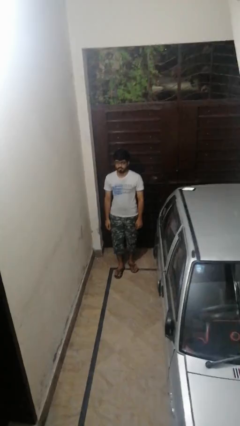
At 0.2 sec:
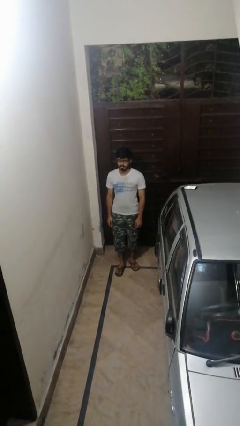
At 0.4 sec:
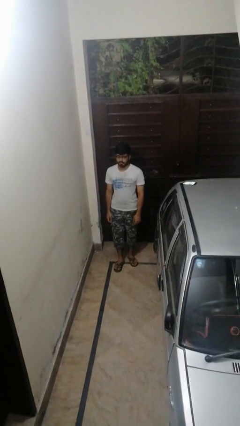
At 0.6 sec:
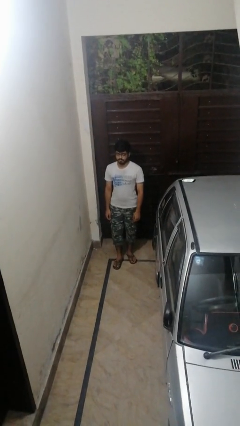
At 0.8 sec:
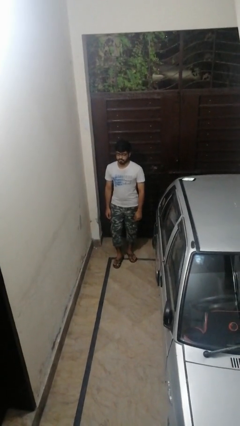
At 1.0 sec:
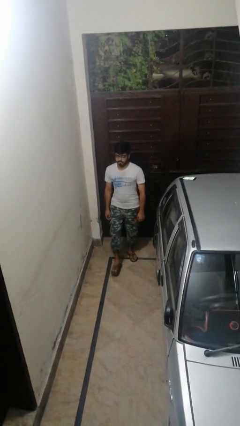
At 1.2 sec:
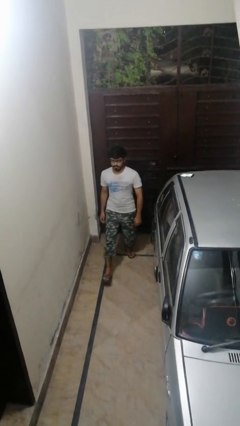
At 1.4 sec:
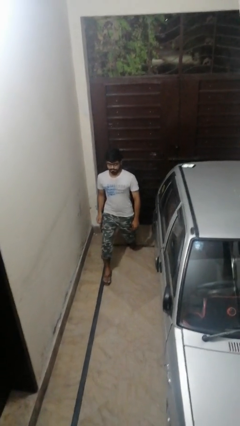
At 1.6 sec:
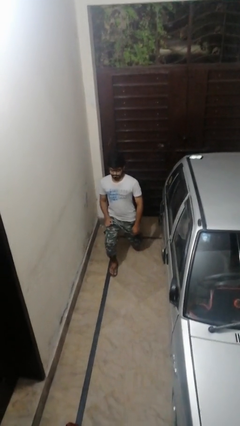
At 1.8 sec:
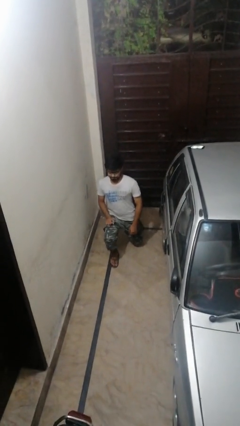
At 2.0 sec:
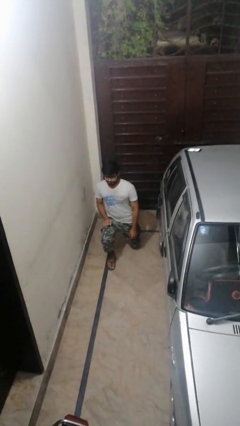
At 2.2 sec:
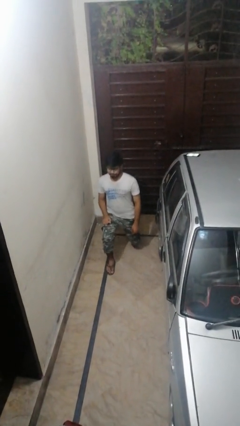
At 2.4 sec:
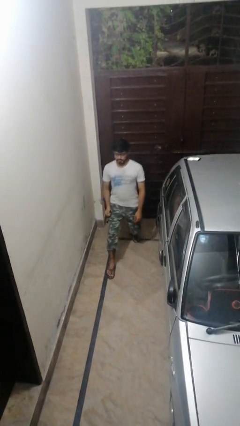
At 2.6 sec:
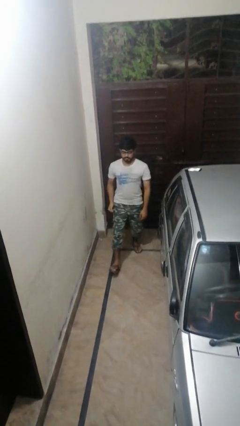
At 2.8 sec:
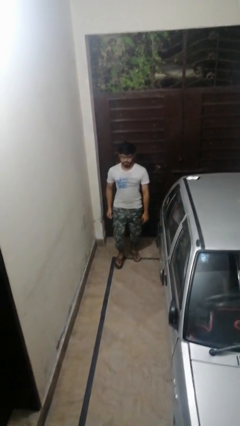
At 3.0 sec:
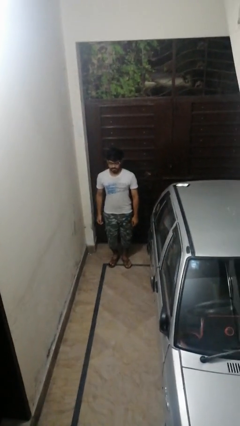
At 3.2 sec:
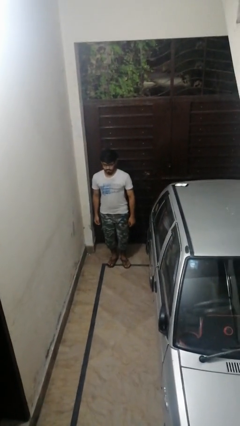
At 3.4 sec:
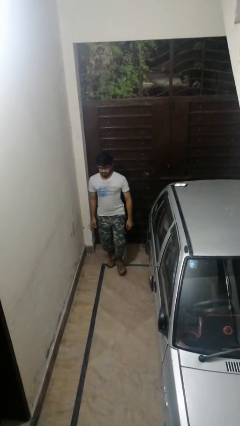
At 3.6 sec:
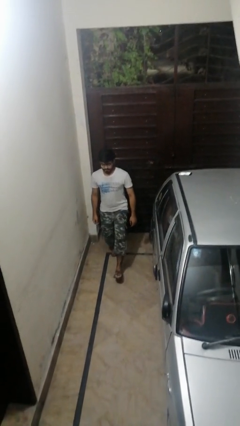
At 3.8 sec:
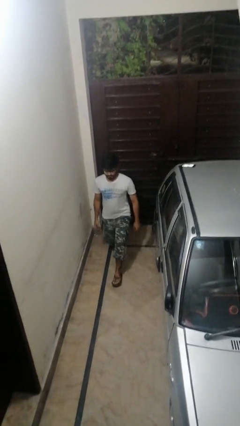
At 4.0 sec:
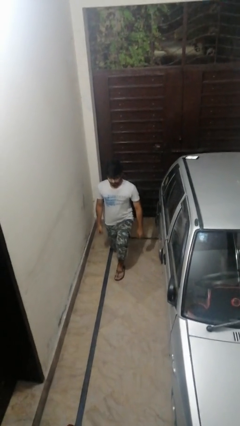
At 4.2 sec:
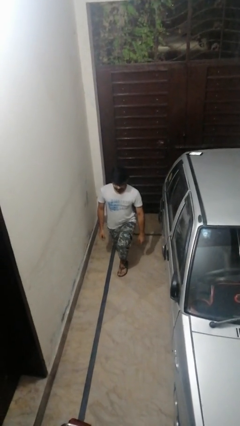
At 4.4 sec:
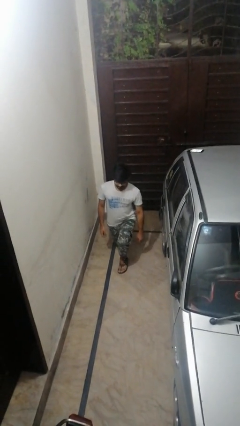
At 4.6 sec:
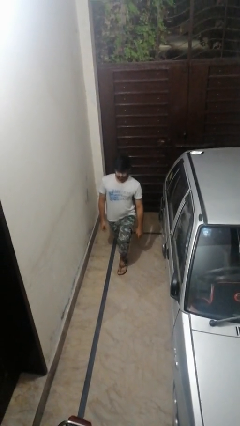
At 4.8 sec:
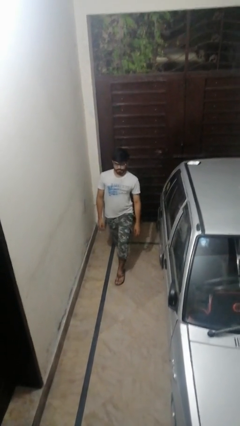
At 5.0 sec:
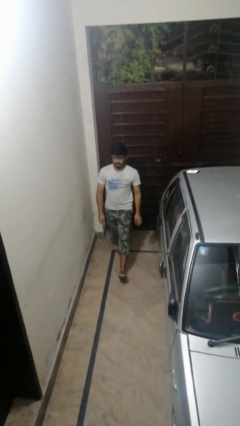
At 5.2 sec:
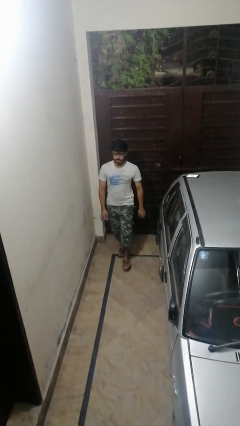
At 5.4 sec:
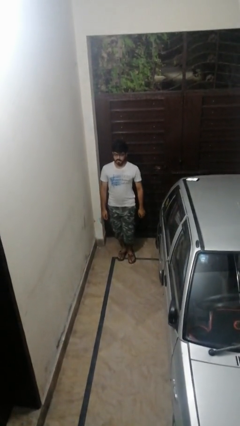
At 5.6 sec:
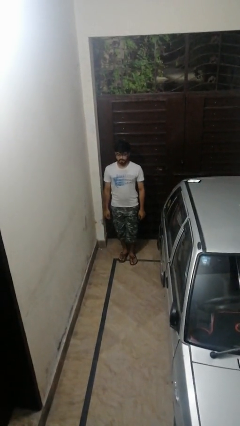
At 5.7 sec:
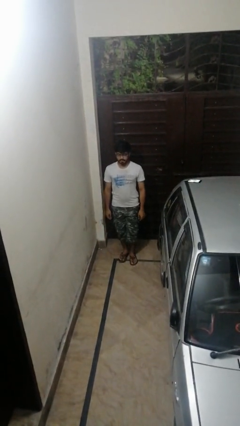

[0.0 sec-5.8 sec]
person exercises with lunges

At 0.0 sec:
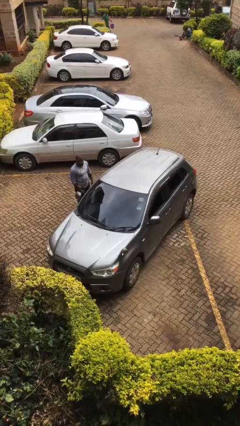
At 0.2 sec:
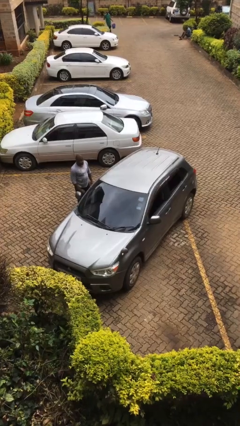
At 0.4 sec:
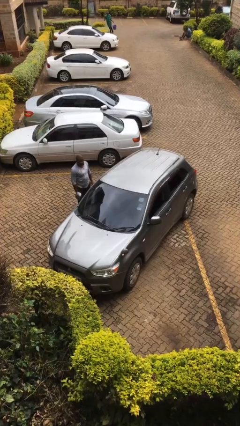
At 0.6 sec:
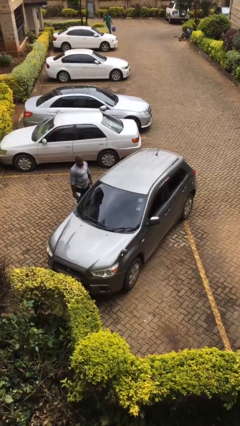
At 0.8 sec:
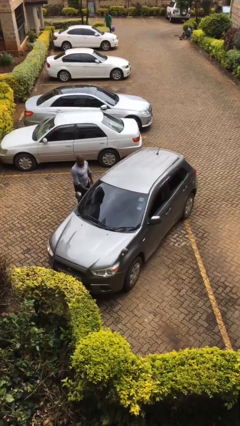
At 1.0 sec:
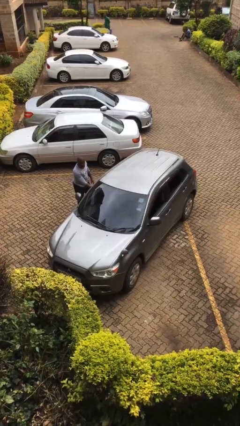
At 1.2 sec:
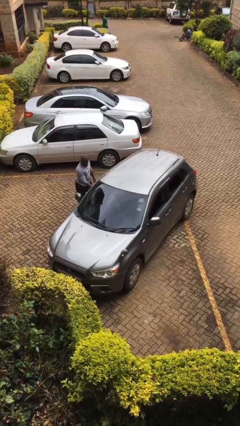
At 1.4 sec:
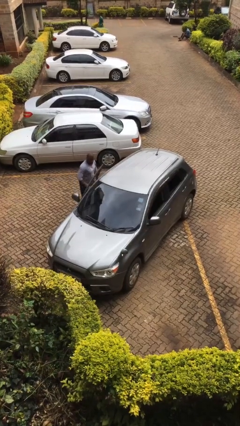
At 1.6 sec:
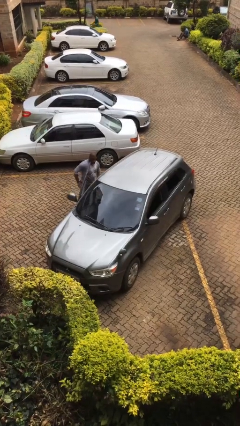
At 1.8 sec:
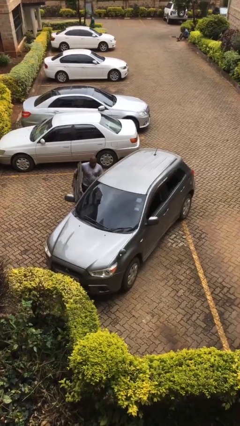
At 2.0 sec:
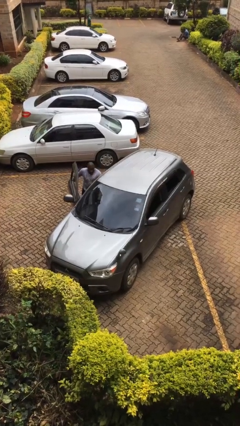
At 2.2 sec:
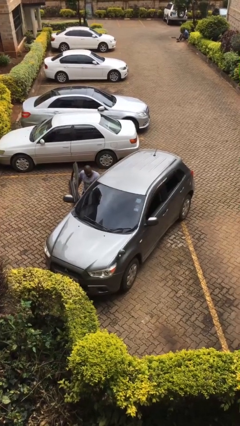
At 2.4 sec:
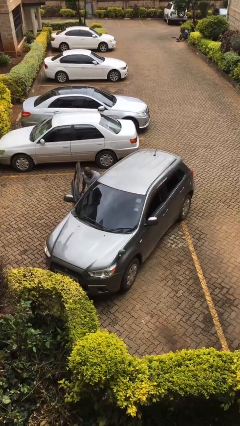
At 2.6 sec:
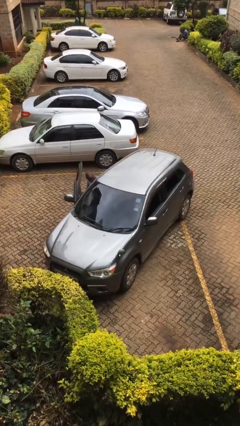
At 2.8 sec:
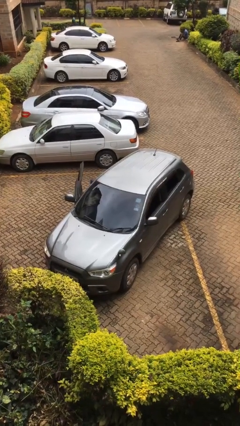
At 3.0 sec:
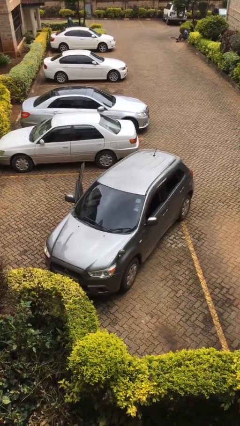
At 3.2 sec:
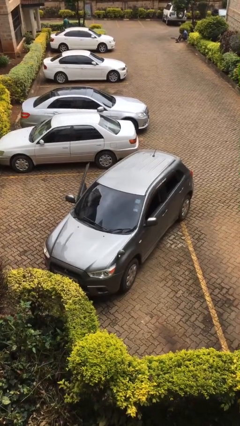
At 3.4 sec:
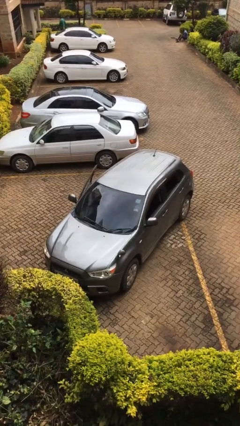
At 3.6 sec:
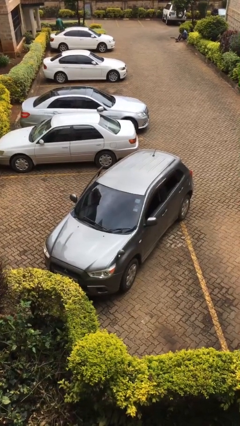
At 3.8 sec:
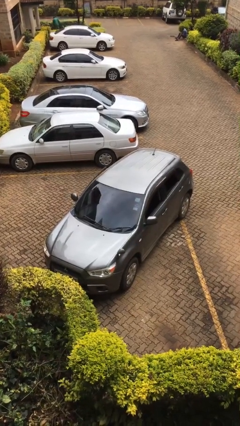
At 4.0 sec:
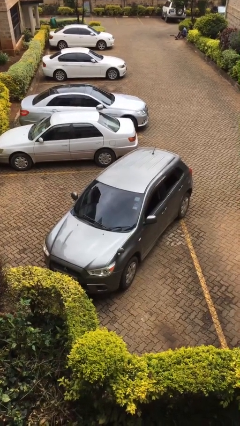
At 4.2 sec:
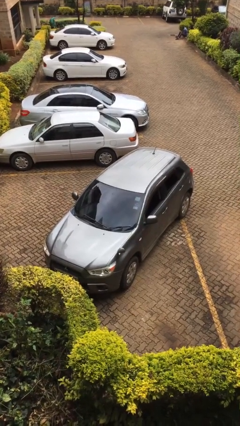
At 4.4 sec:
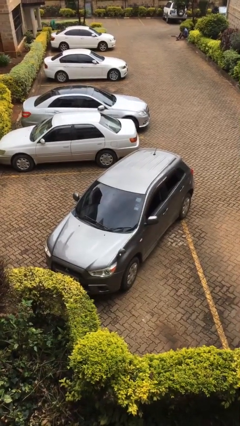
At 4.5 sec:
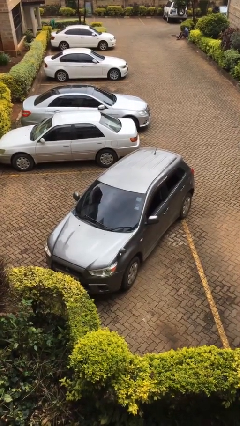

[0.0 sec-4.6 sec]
car picks up person

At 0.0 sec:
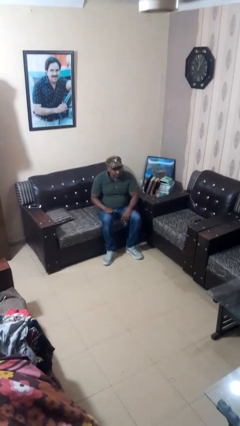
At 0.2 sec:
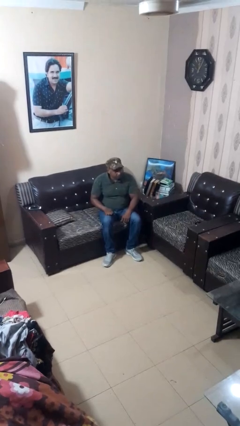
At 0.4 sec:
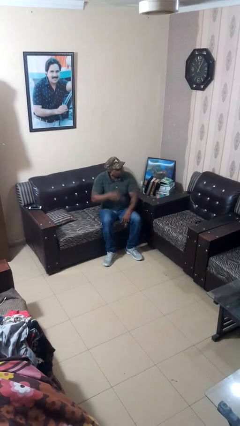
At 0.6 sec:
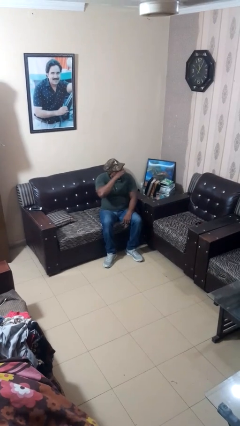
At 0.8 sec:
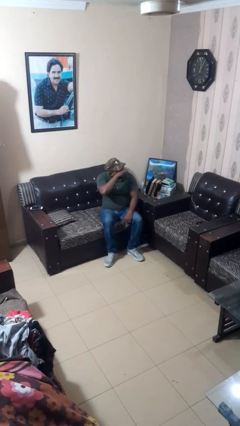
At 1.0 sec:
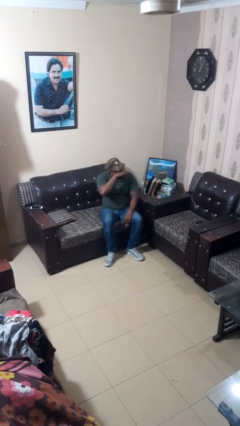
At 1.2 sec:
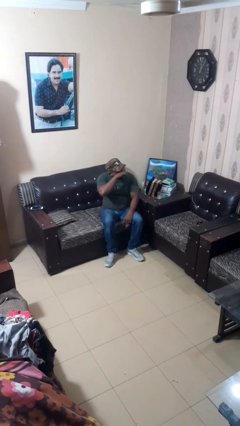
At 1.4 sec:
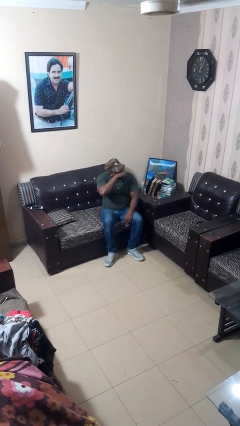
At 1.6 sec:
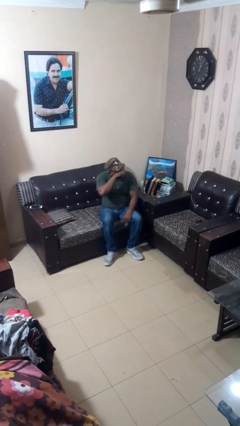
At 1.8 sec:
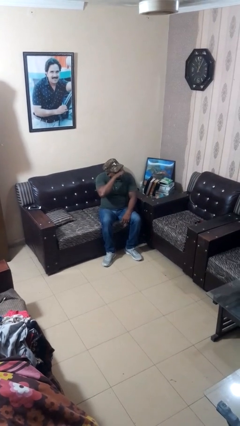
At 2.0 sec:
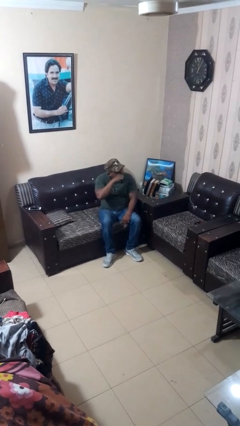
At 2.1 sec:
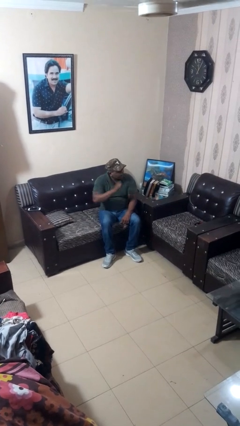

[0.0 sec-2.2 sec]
person rubs eyes

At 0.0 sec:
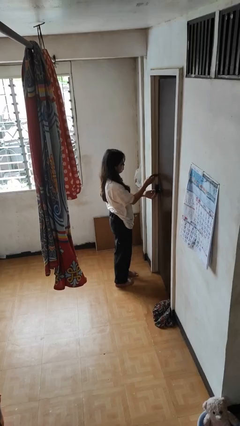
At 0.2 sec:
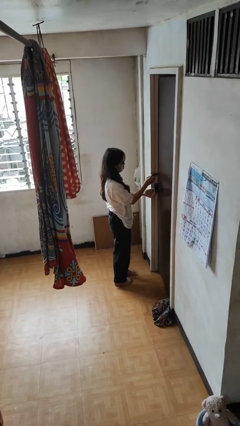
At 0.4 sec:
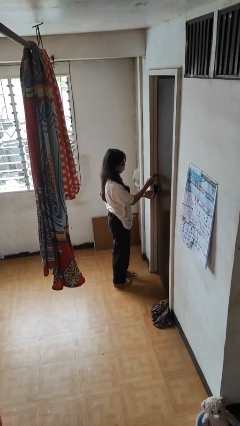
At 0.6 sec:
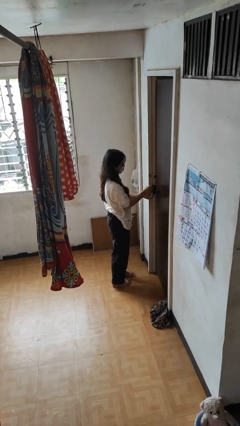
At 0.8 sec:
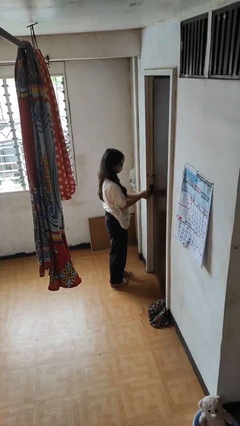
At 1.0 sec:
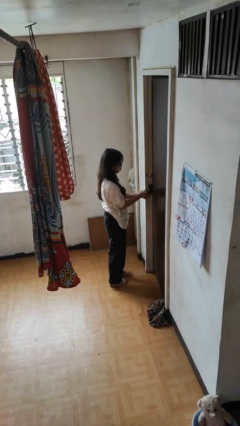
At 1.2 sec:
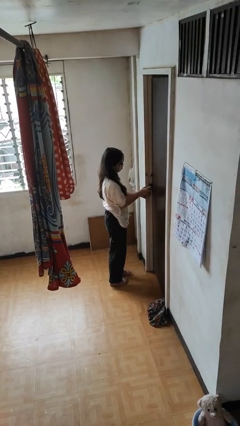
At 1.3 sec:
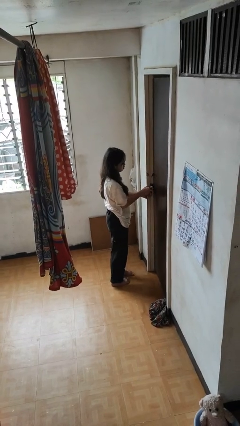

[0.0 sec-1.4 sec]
person unlocks door with keys

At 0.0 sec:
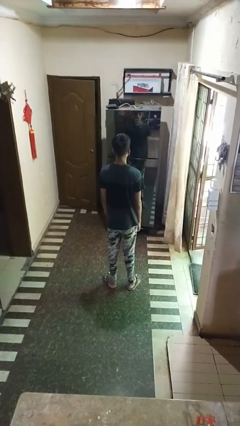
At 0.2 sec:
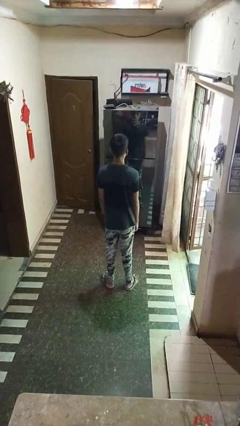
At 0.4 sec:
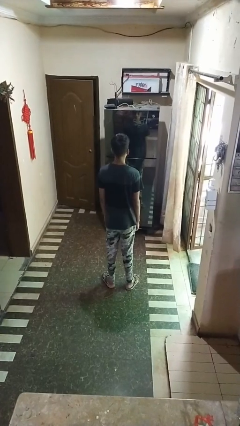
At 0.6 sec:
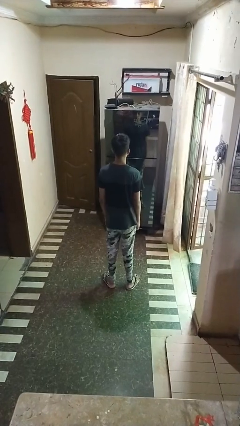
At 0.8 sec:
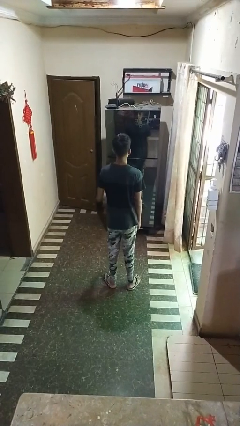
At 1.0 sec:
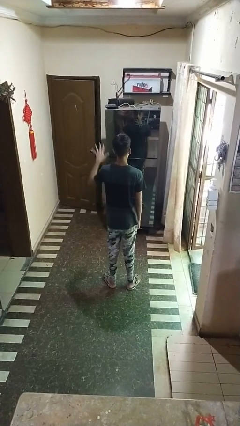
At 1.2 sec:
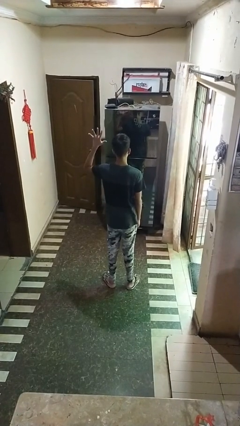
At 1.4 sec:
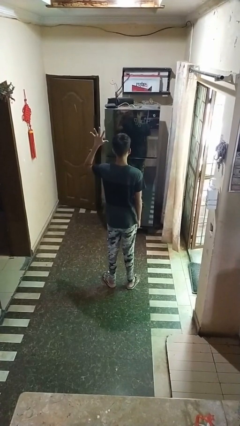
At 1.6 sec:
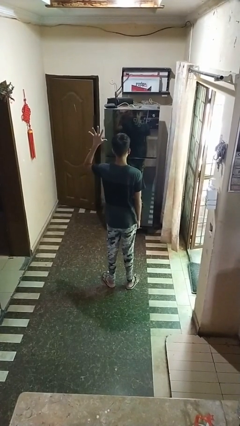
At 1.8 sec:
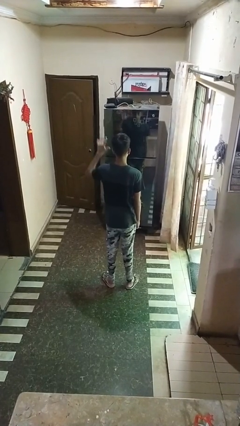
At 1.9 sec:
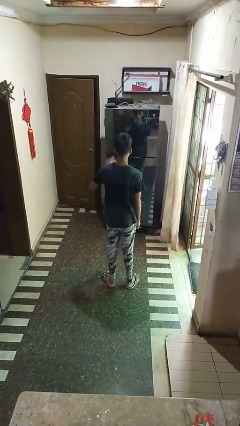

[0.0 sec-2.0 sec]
person gestures number five

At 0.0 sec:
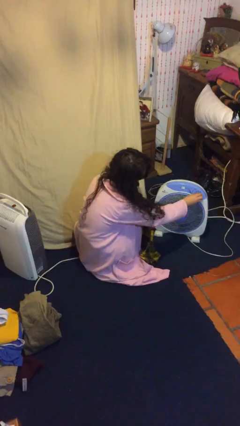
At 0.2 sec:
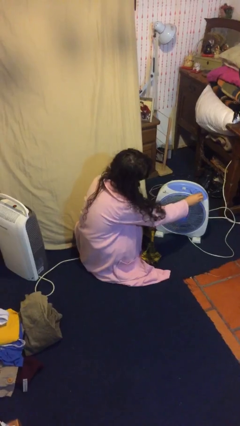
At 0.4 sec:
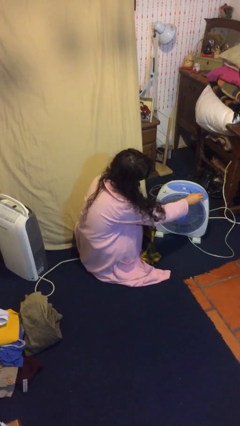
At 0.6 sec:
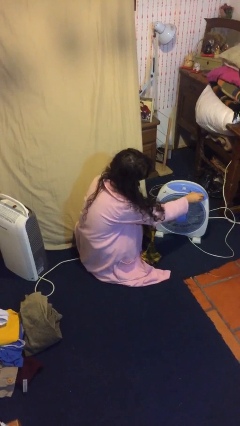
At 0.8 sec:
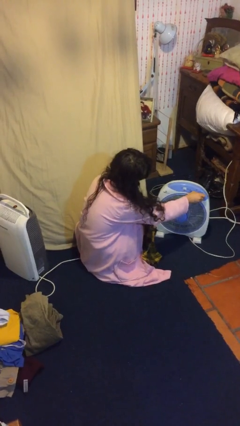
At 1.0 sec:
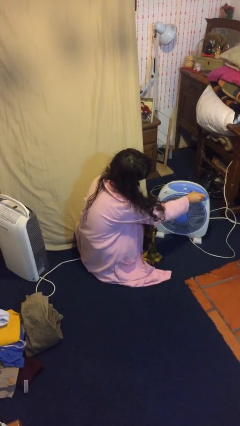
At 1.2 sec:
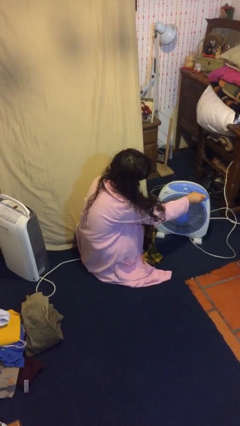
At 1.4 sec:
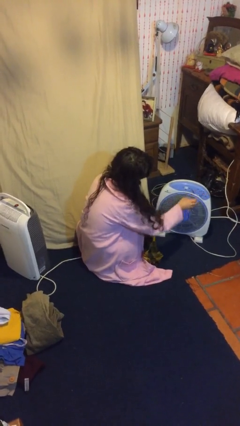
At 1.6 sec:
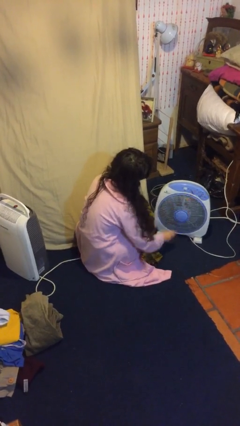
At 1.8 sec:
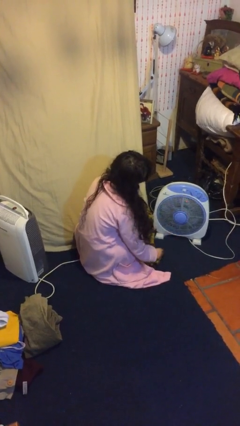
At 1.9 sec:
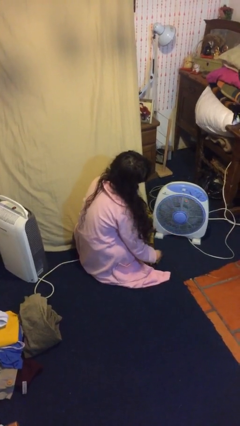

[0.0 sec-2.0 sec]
person turns off fan
